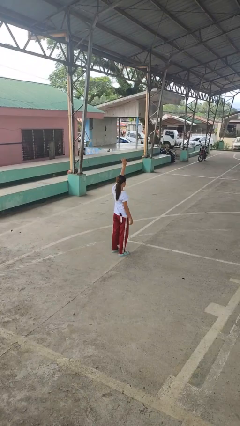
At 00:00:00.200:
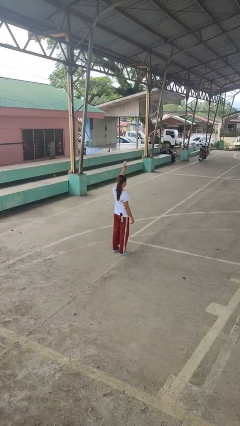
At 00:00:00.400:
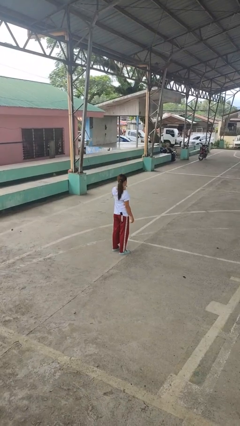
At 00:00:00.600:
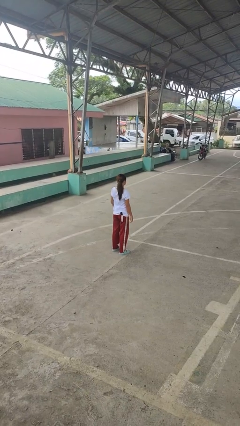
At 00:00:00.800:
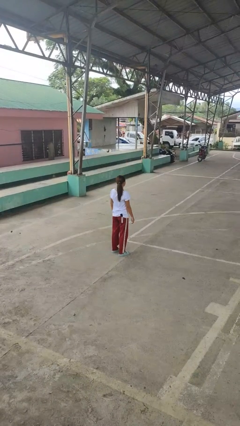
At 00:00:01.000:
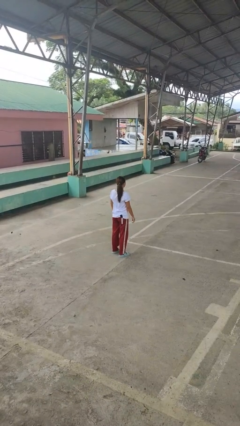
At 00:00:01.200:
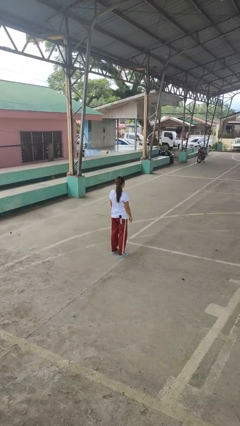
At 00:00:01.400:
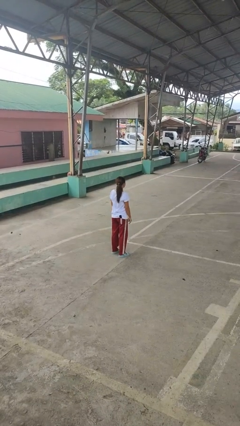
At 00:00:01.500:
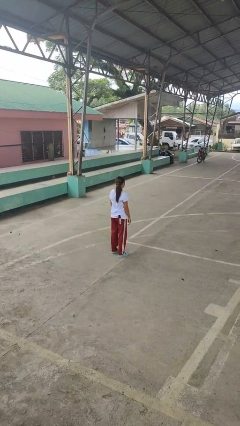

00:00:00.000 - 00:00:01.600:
person gestures lower hand

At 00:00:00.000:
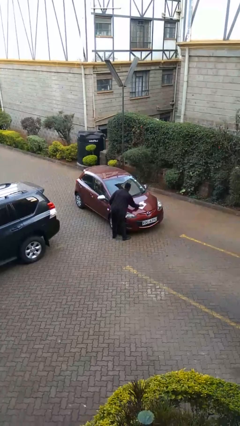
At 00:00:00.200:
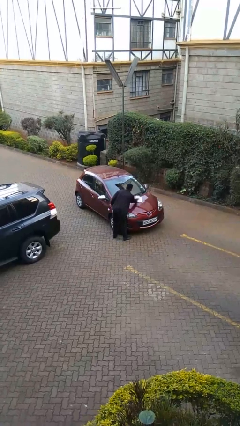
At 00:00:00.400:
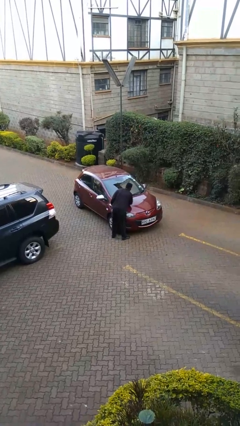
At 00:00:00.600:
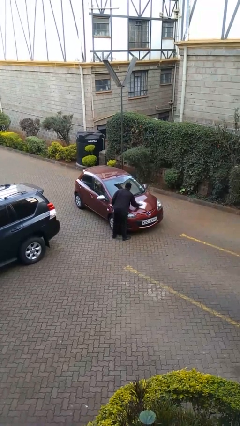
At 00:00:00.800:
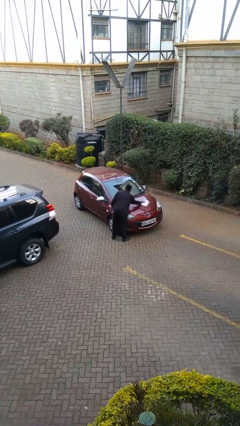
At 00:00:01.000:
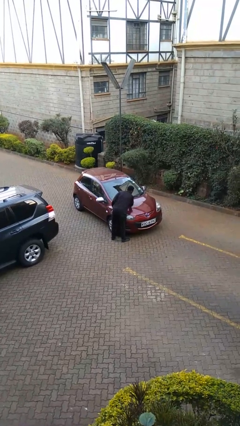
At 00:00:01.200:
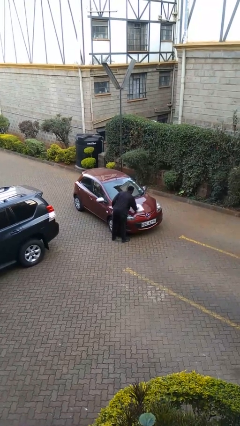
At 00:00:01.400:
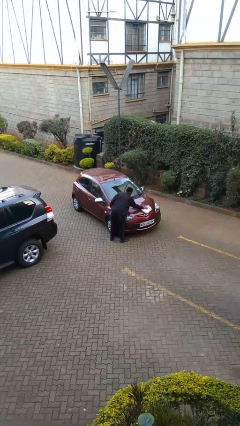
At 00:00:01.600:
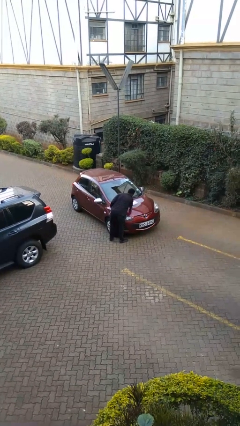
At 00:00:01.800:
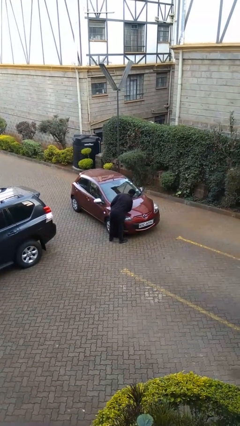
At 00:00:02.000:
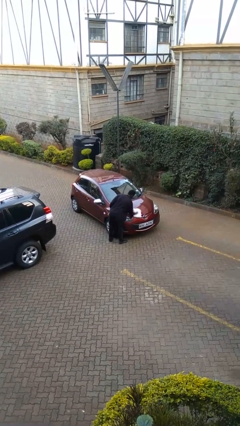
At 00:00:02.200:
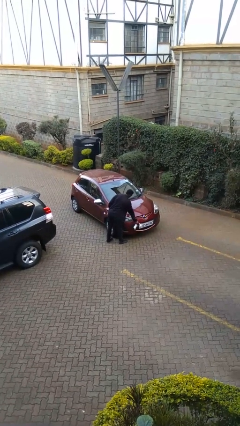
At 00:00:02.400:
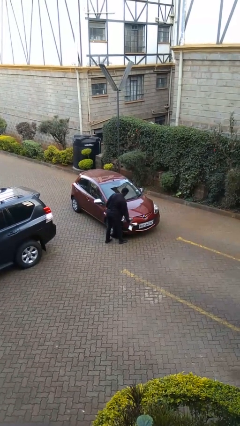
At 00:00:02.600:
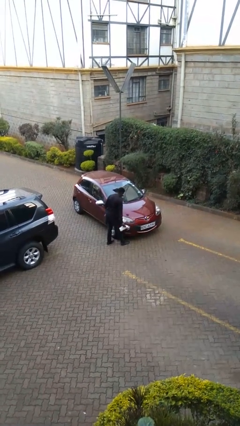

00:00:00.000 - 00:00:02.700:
person polishes car with rag

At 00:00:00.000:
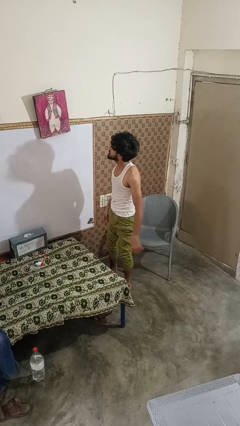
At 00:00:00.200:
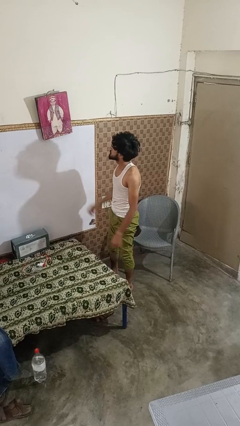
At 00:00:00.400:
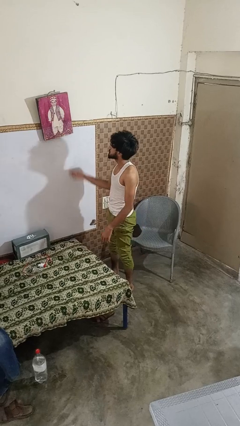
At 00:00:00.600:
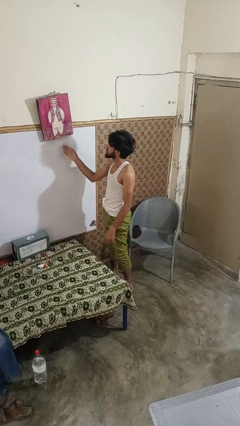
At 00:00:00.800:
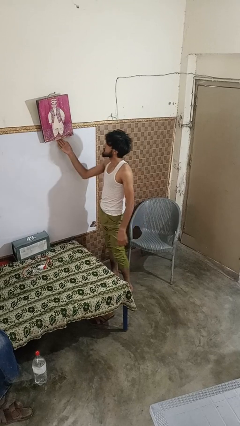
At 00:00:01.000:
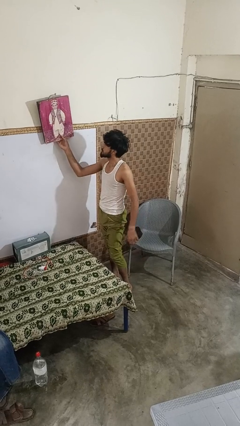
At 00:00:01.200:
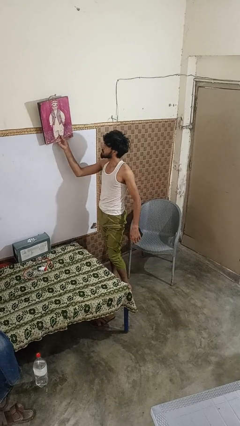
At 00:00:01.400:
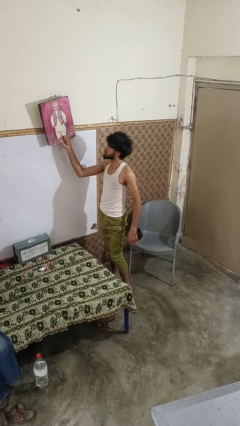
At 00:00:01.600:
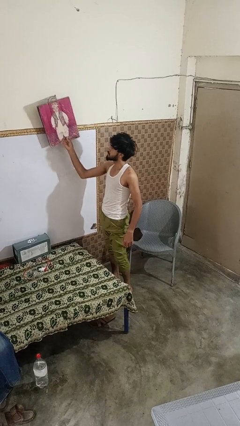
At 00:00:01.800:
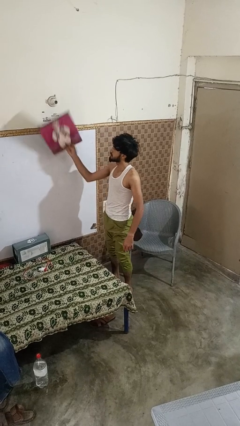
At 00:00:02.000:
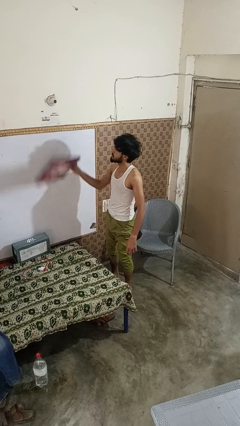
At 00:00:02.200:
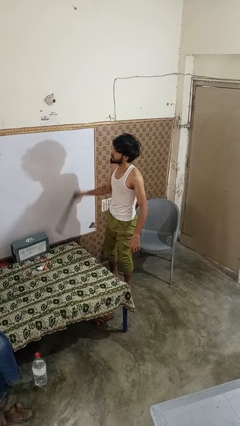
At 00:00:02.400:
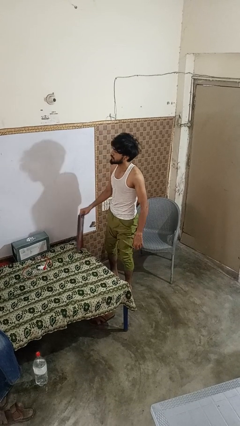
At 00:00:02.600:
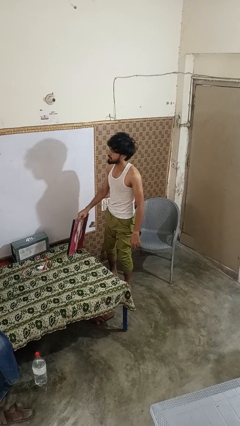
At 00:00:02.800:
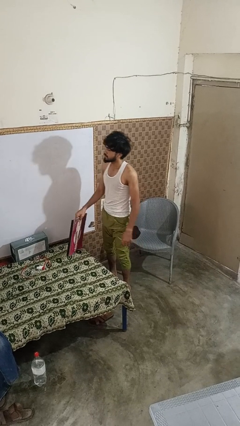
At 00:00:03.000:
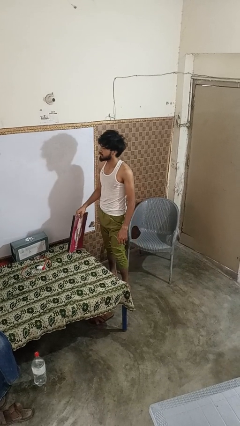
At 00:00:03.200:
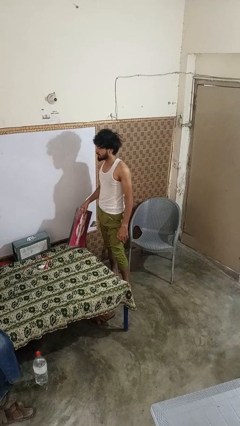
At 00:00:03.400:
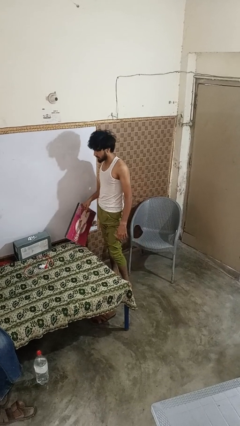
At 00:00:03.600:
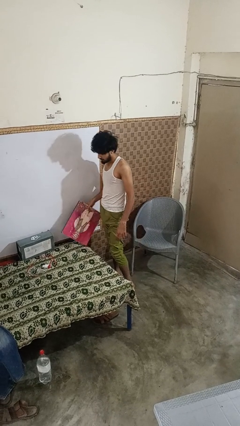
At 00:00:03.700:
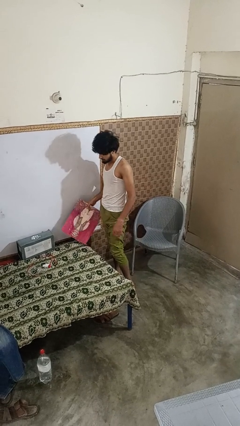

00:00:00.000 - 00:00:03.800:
person takes down picture frame

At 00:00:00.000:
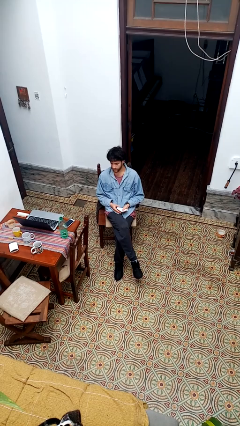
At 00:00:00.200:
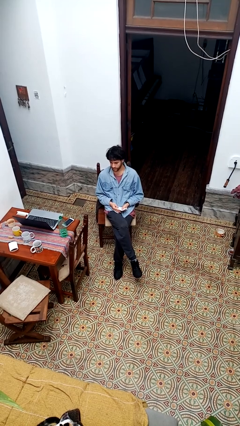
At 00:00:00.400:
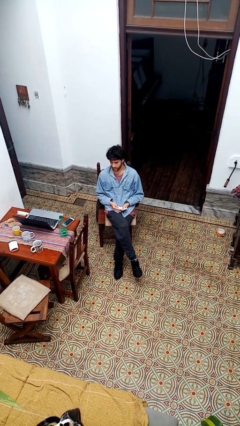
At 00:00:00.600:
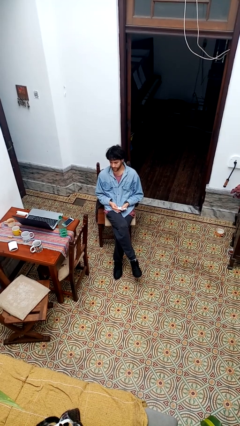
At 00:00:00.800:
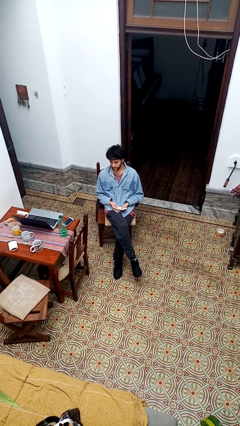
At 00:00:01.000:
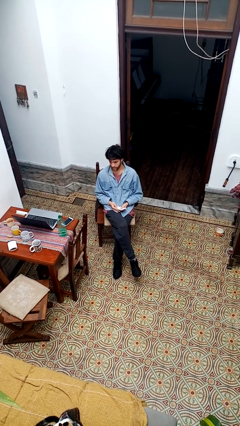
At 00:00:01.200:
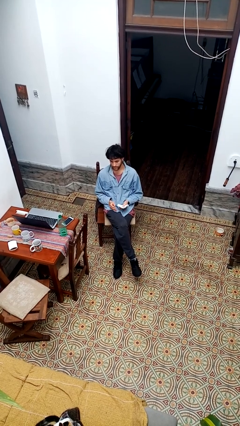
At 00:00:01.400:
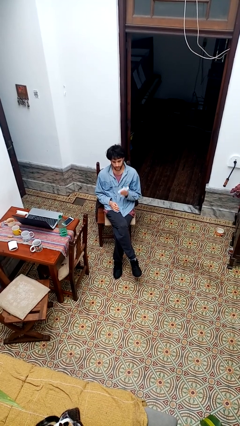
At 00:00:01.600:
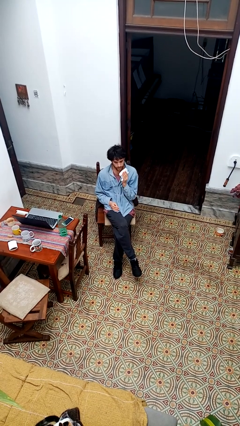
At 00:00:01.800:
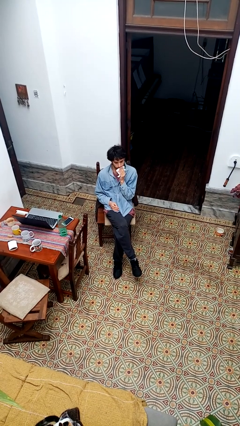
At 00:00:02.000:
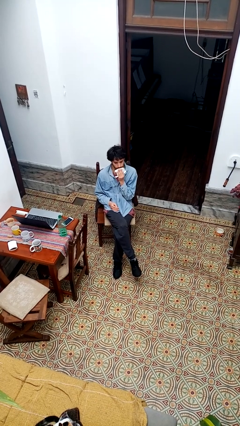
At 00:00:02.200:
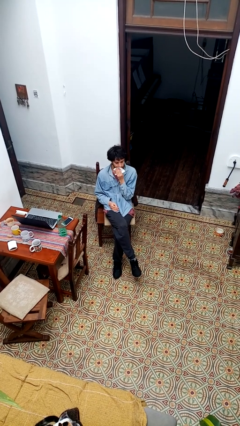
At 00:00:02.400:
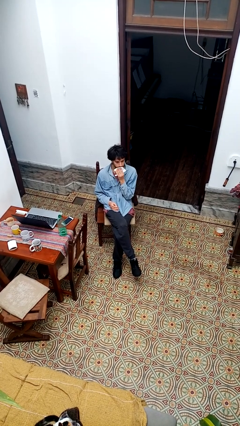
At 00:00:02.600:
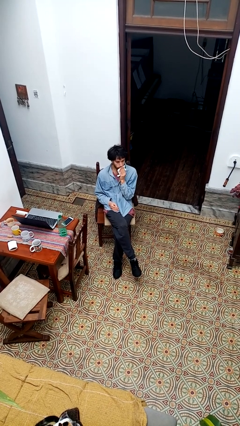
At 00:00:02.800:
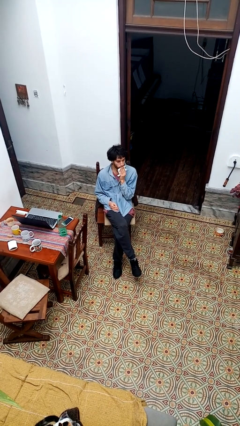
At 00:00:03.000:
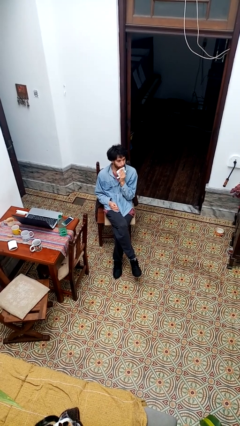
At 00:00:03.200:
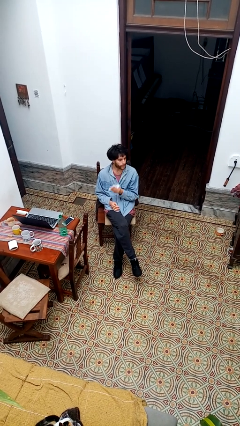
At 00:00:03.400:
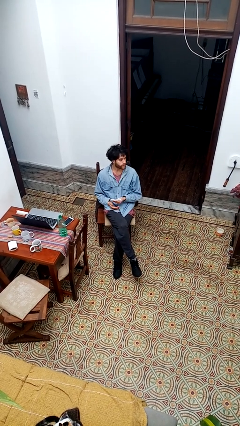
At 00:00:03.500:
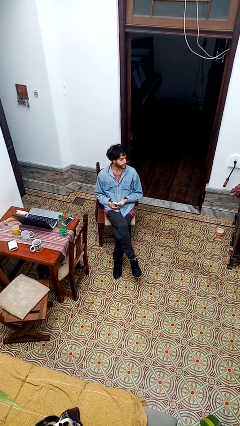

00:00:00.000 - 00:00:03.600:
person wipes mouth with napkin

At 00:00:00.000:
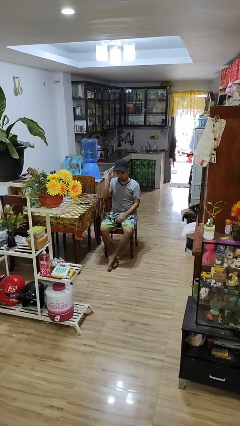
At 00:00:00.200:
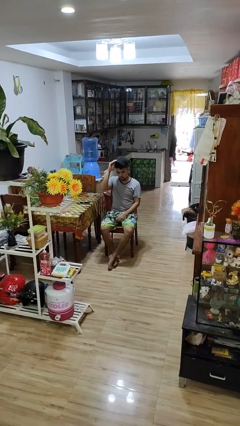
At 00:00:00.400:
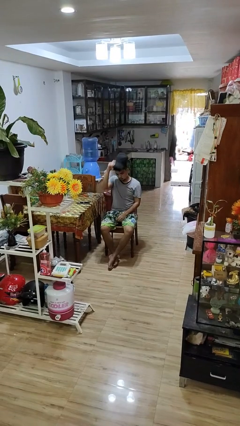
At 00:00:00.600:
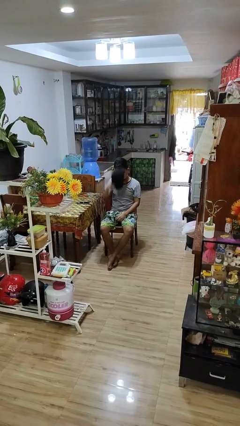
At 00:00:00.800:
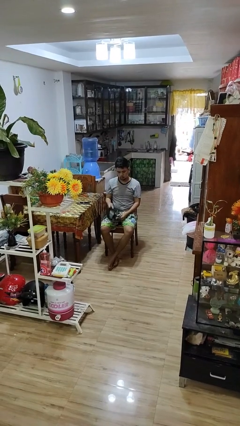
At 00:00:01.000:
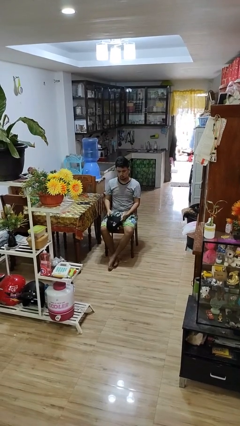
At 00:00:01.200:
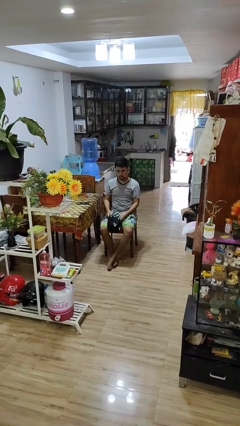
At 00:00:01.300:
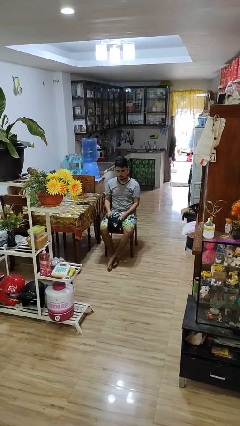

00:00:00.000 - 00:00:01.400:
person takes off hat

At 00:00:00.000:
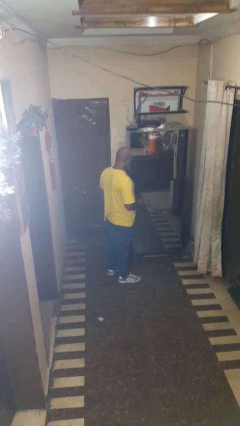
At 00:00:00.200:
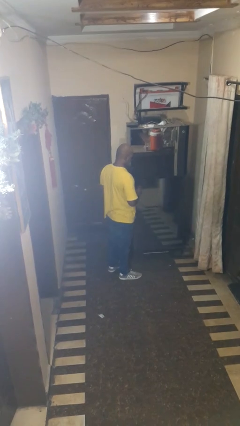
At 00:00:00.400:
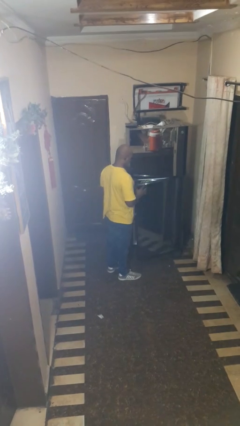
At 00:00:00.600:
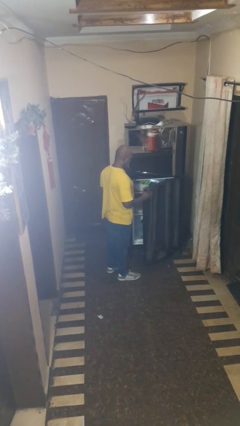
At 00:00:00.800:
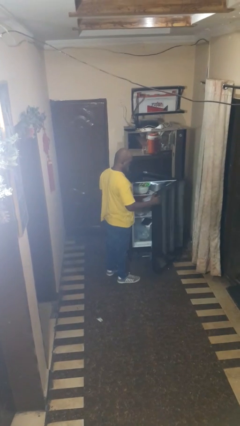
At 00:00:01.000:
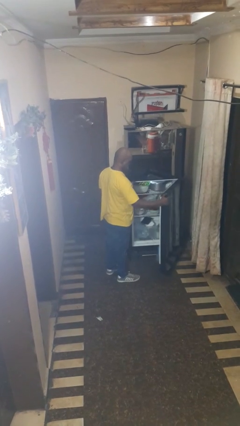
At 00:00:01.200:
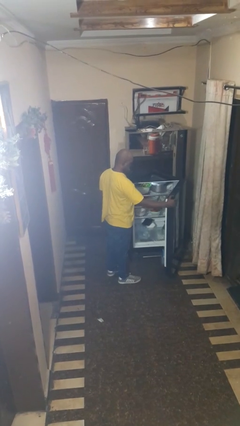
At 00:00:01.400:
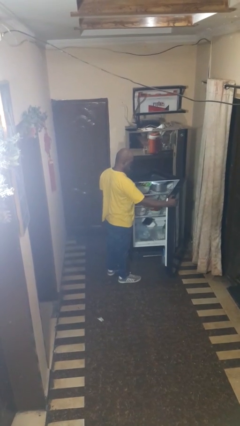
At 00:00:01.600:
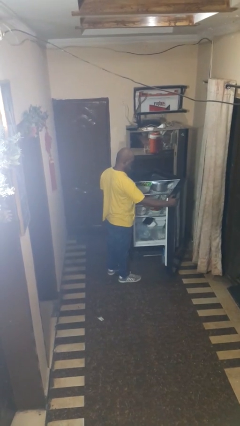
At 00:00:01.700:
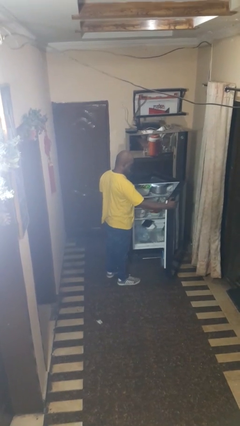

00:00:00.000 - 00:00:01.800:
person opens refrigerator

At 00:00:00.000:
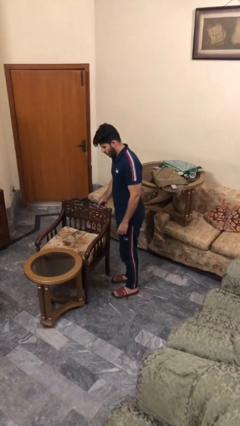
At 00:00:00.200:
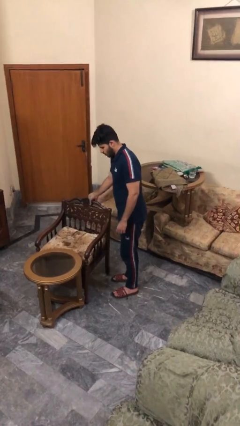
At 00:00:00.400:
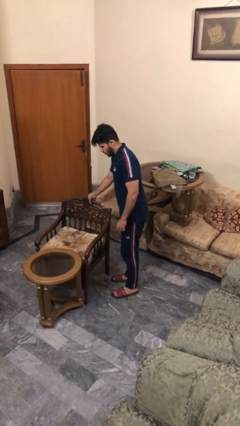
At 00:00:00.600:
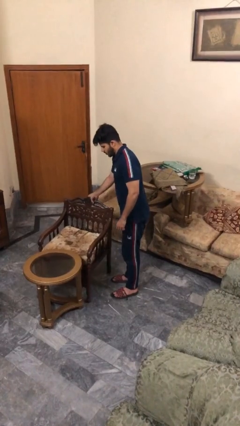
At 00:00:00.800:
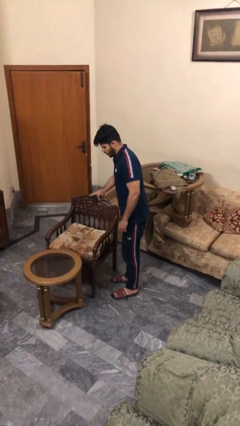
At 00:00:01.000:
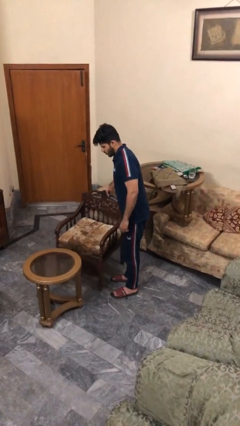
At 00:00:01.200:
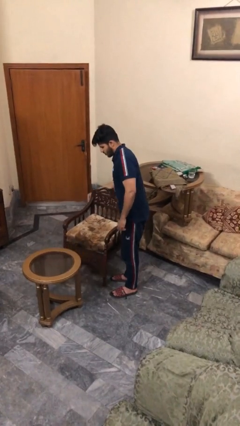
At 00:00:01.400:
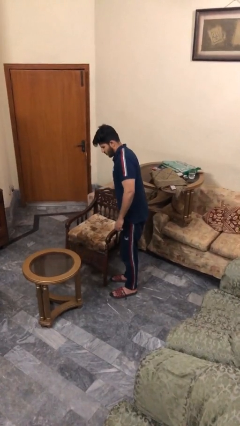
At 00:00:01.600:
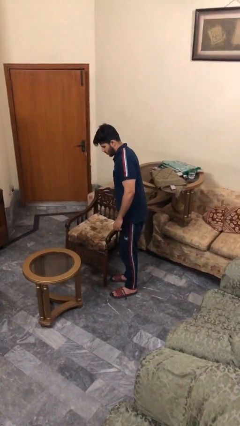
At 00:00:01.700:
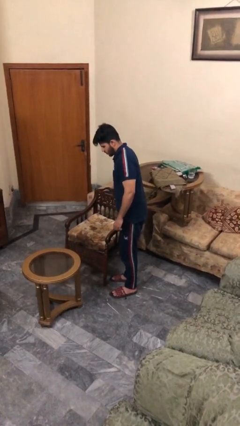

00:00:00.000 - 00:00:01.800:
person pulls out chair
